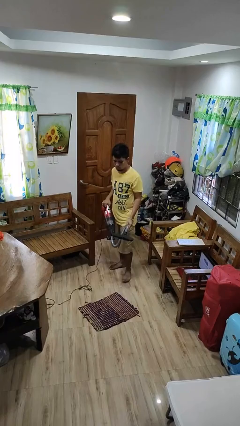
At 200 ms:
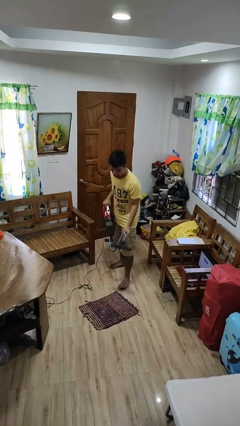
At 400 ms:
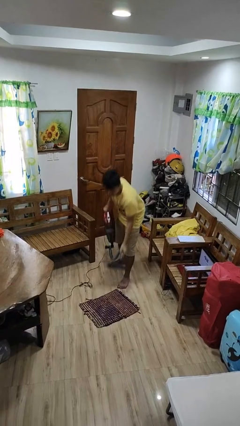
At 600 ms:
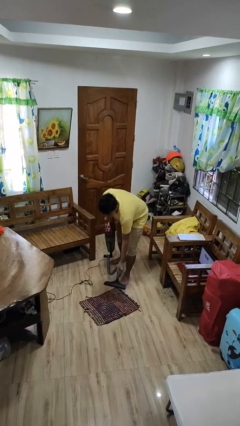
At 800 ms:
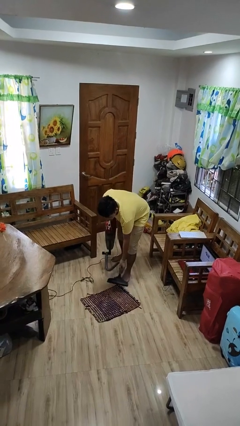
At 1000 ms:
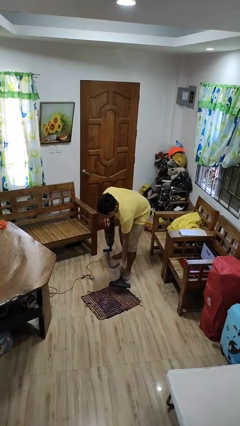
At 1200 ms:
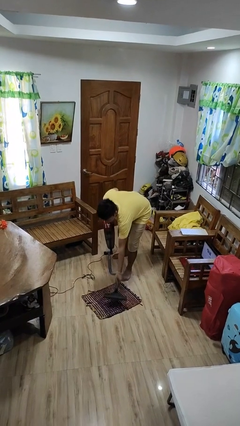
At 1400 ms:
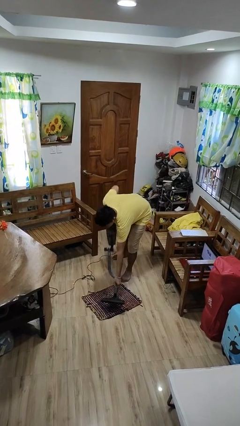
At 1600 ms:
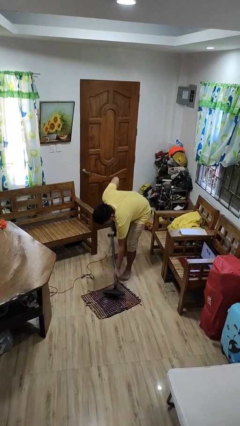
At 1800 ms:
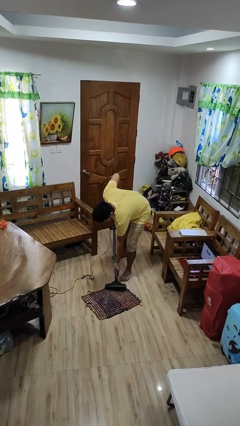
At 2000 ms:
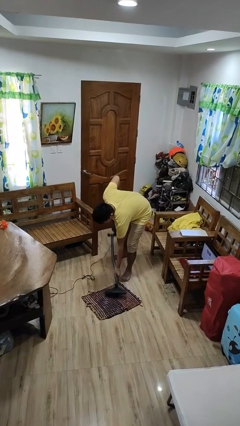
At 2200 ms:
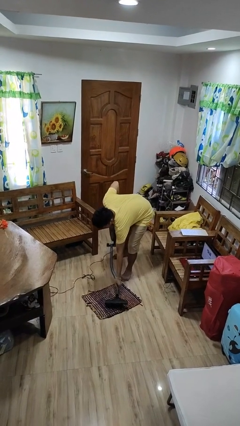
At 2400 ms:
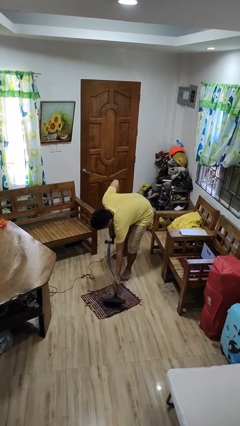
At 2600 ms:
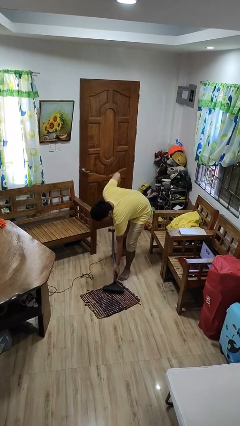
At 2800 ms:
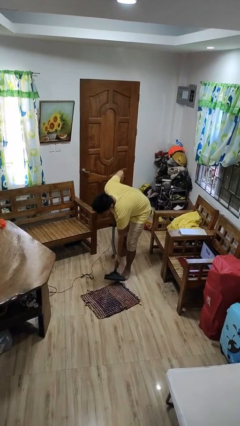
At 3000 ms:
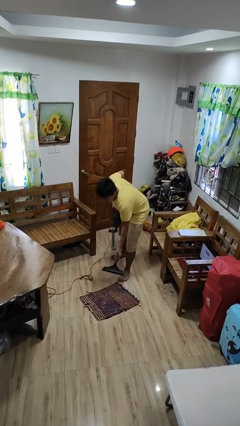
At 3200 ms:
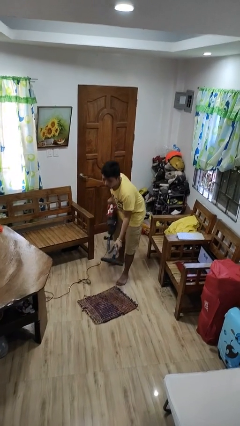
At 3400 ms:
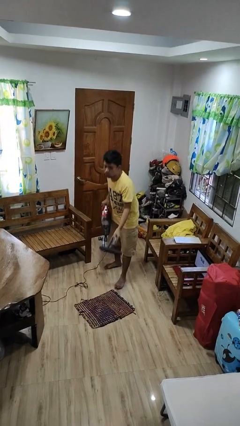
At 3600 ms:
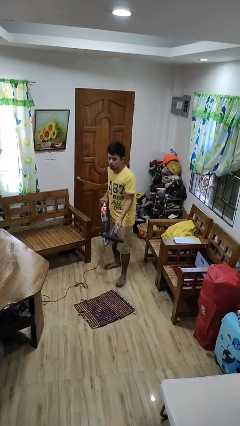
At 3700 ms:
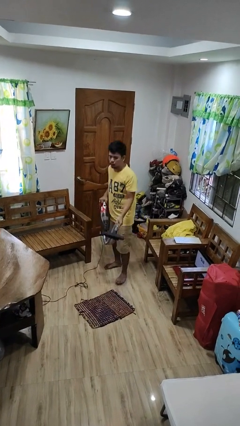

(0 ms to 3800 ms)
person vacuums carpet

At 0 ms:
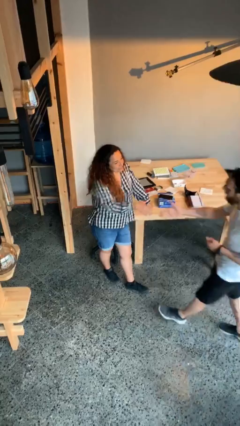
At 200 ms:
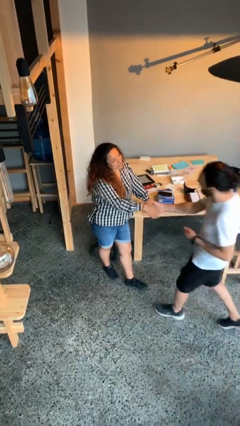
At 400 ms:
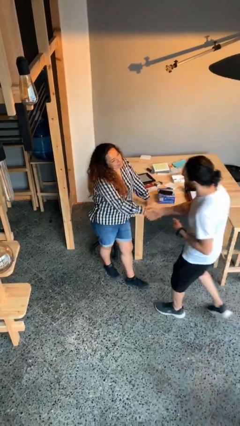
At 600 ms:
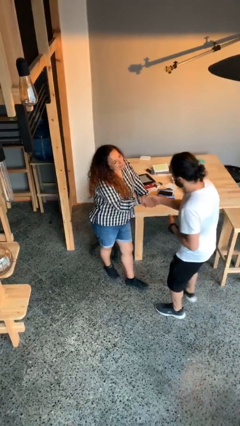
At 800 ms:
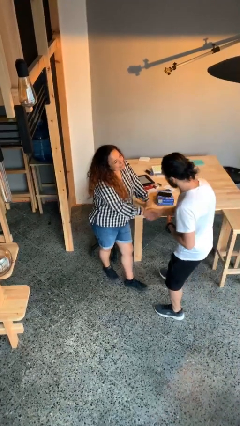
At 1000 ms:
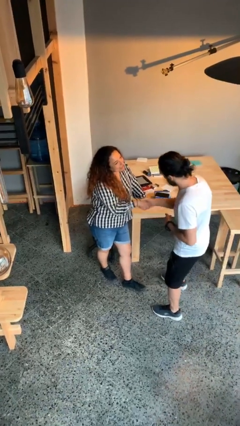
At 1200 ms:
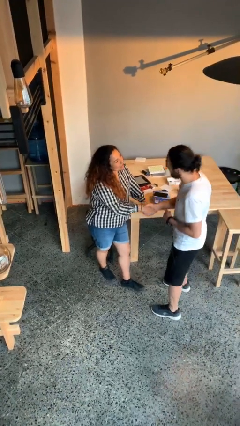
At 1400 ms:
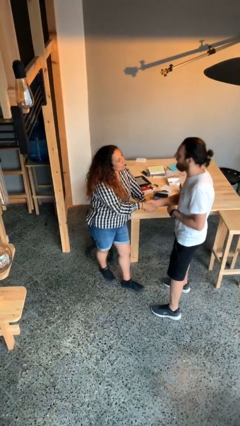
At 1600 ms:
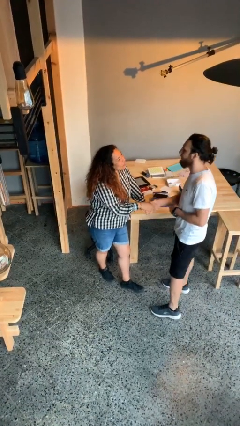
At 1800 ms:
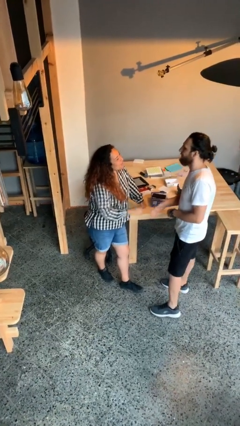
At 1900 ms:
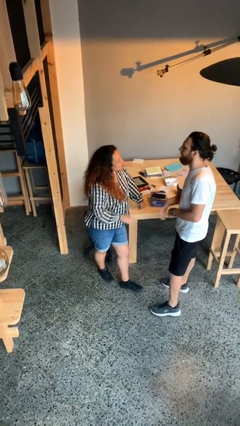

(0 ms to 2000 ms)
person shakes hand

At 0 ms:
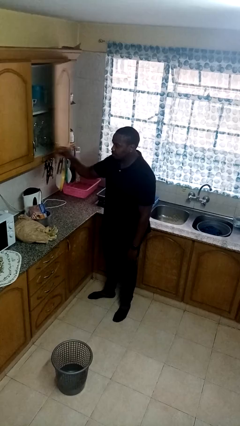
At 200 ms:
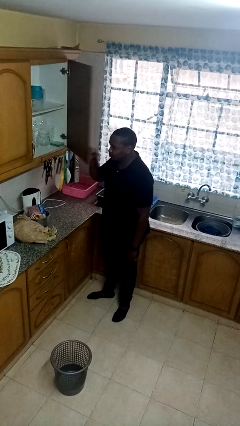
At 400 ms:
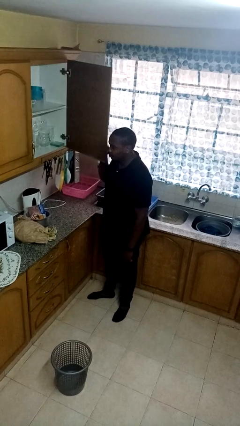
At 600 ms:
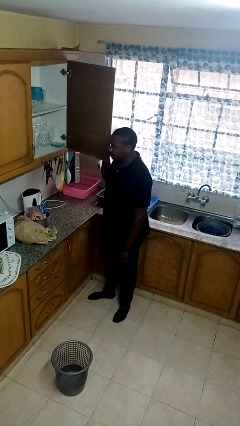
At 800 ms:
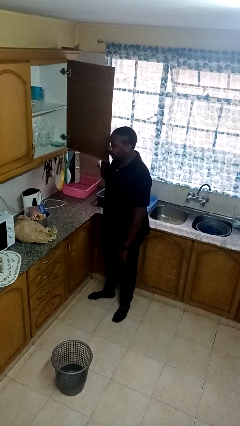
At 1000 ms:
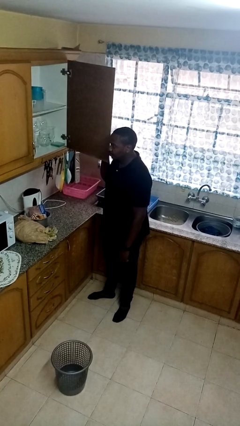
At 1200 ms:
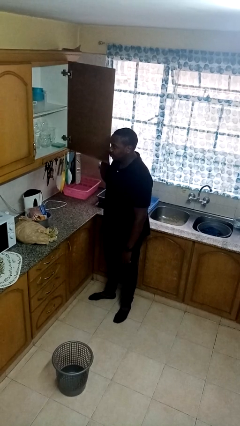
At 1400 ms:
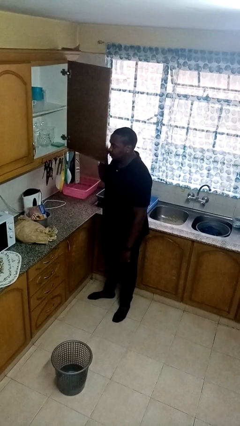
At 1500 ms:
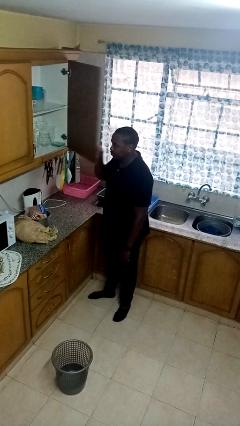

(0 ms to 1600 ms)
person opens cabinet

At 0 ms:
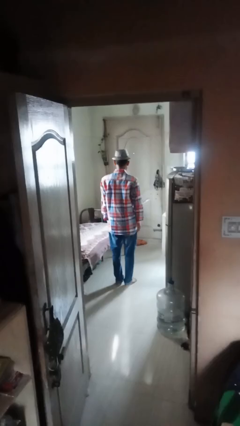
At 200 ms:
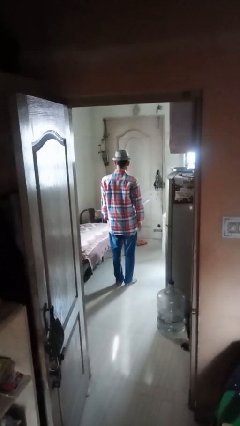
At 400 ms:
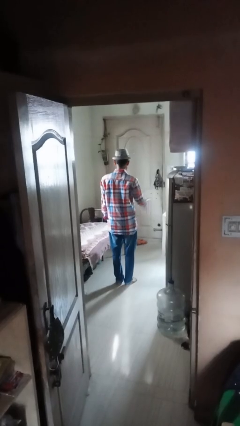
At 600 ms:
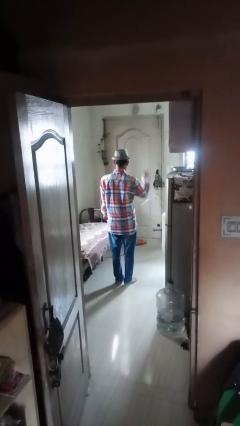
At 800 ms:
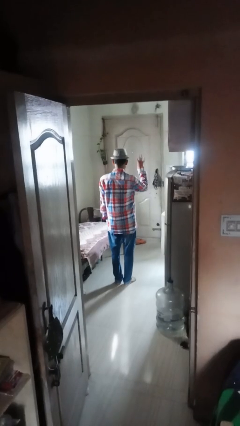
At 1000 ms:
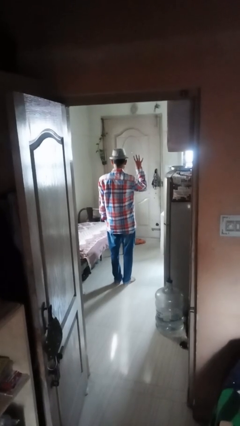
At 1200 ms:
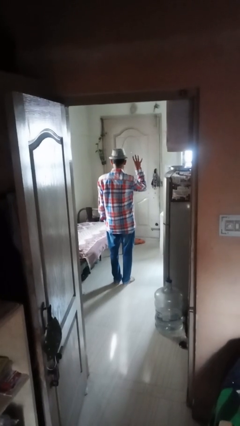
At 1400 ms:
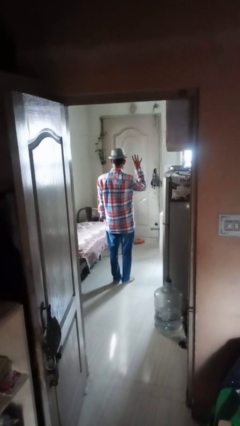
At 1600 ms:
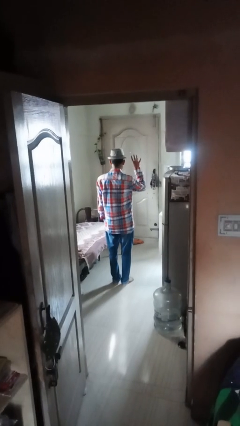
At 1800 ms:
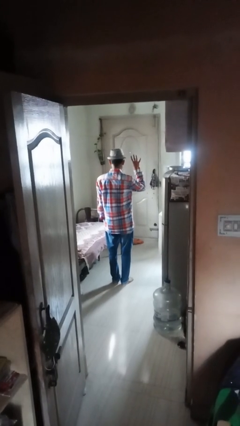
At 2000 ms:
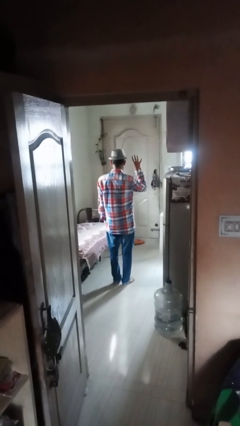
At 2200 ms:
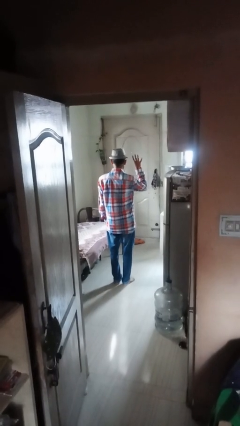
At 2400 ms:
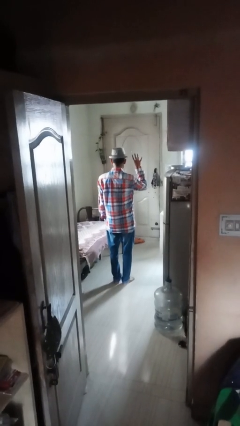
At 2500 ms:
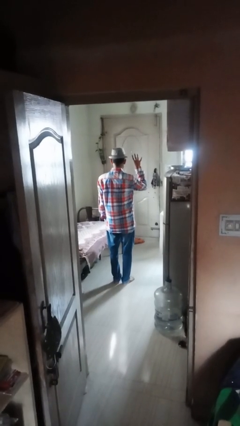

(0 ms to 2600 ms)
person gestures number four

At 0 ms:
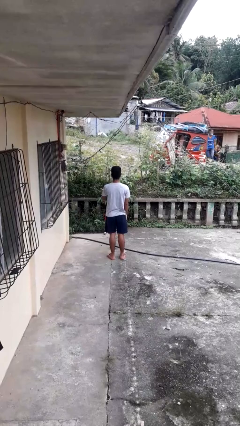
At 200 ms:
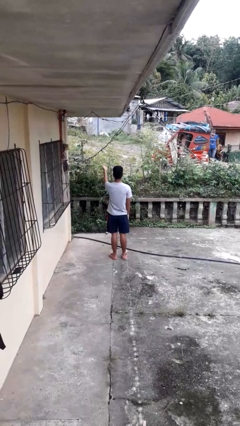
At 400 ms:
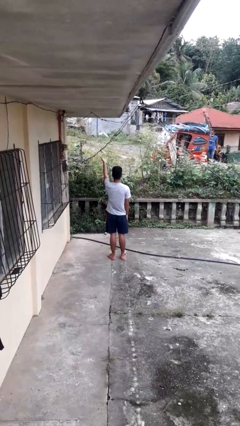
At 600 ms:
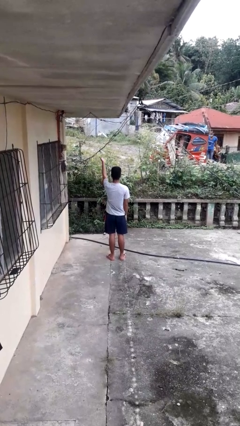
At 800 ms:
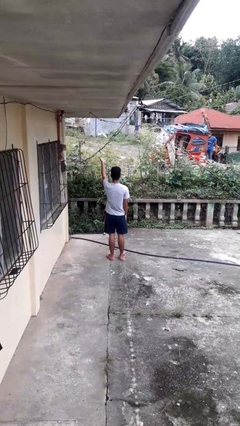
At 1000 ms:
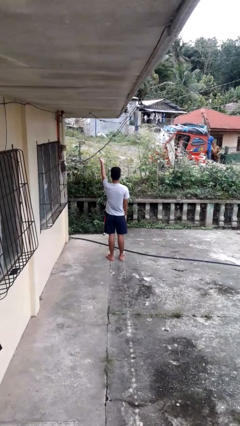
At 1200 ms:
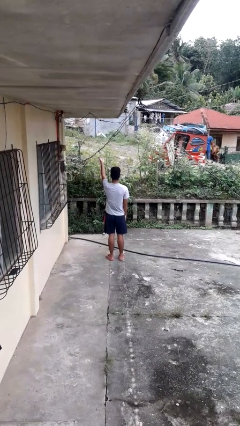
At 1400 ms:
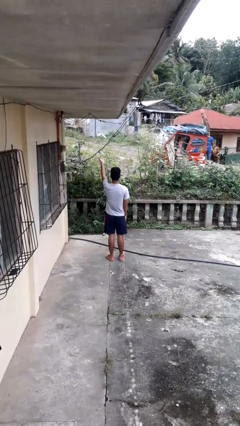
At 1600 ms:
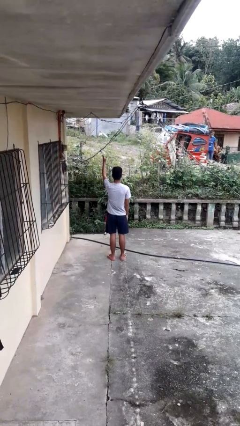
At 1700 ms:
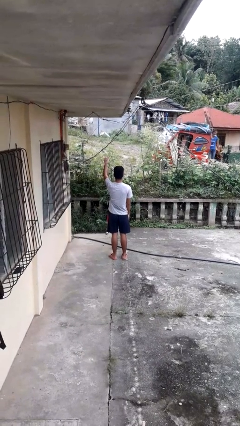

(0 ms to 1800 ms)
person gestures swipe up

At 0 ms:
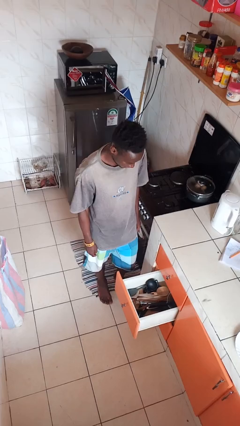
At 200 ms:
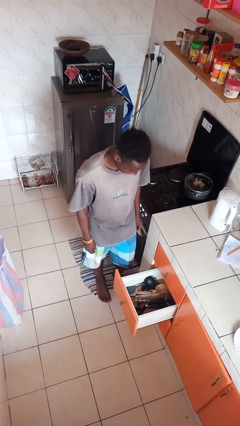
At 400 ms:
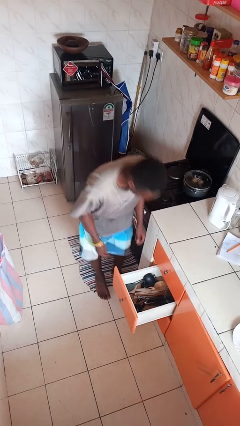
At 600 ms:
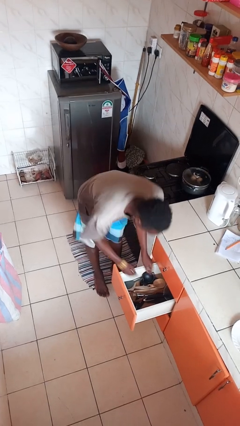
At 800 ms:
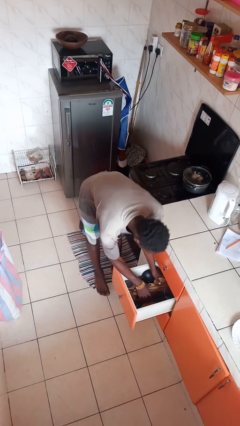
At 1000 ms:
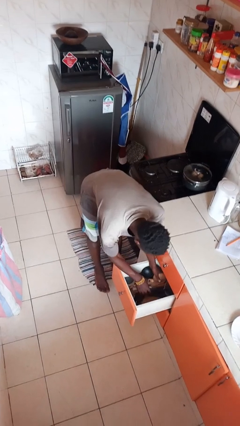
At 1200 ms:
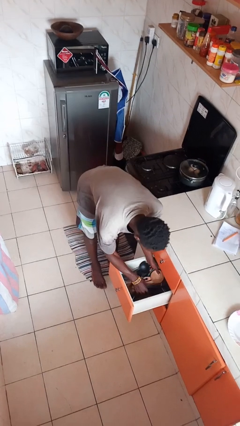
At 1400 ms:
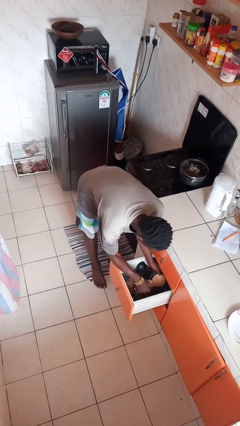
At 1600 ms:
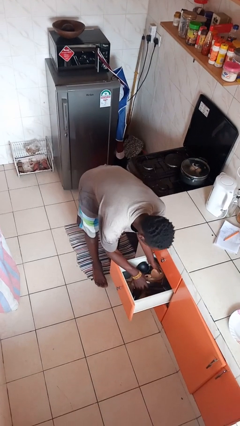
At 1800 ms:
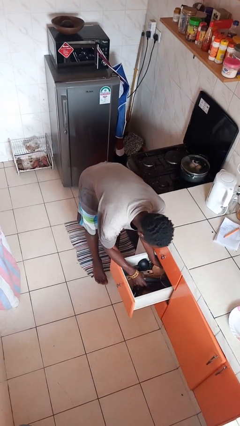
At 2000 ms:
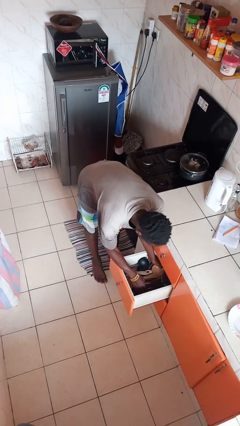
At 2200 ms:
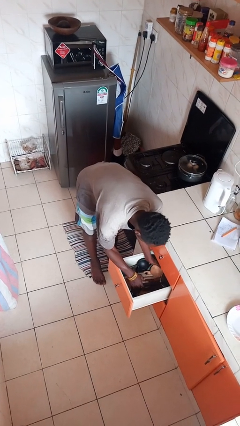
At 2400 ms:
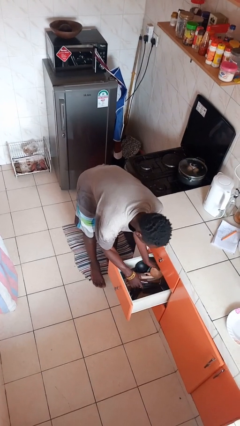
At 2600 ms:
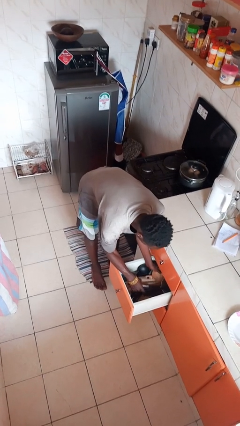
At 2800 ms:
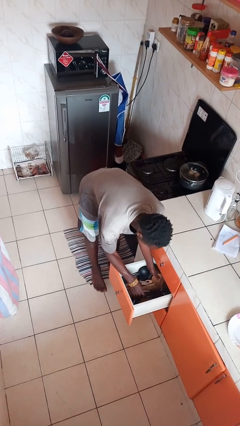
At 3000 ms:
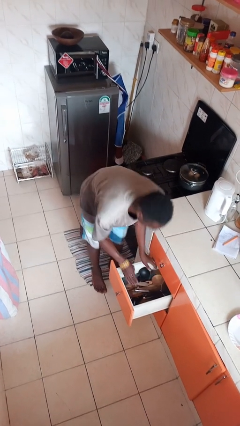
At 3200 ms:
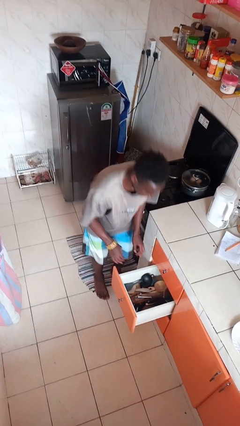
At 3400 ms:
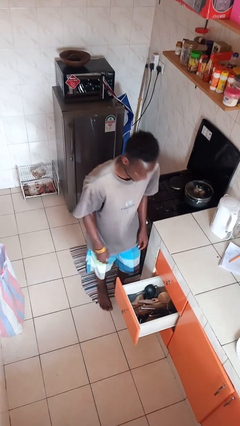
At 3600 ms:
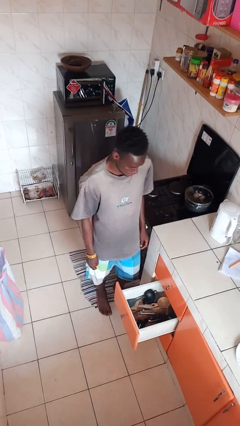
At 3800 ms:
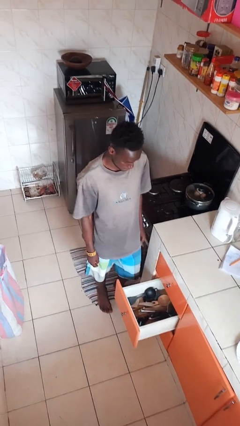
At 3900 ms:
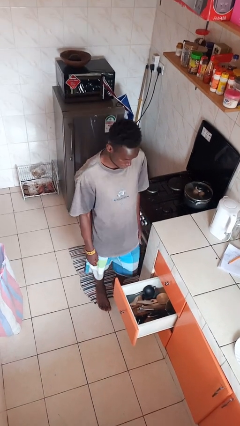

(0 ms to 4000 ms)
person searches in kitchen drawer

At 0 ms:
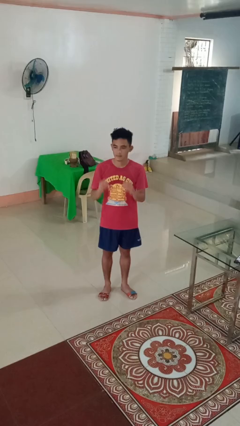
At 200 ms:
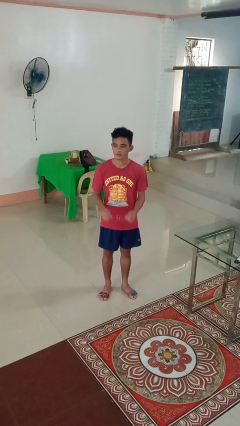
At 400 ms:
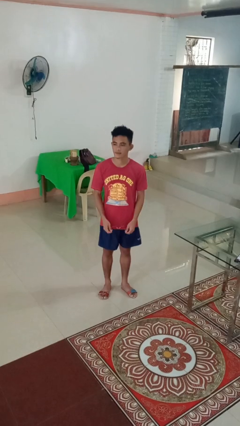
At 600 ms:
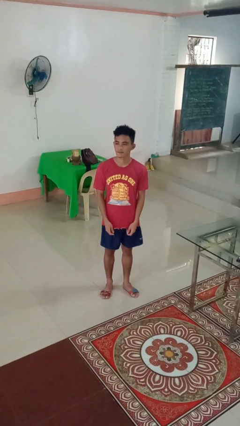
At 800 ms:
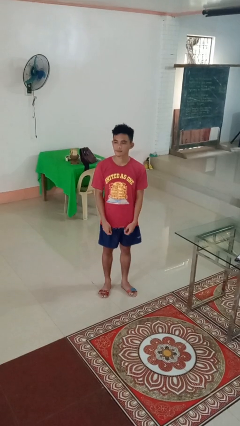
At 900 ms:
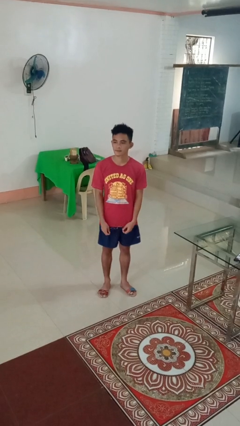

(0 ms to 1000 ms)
person takes off glasses

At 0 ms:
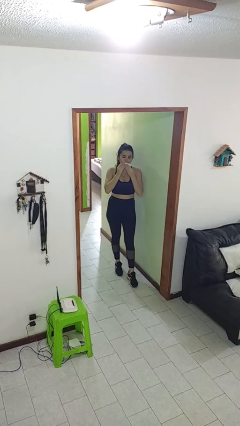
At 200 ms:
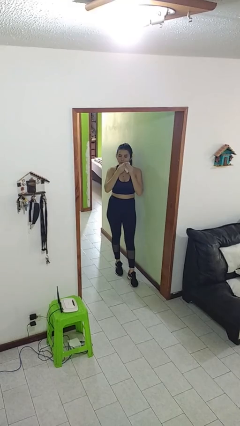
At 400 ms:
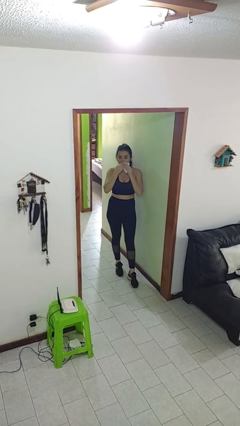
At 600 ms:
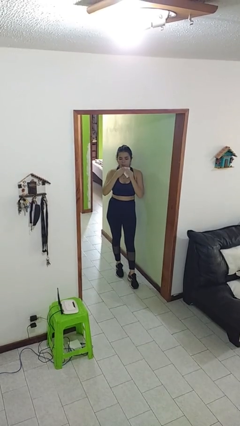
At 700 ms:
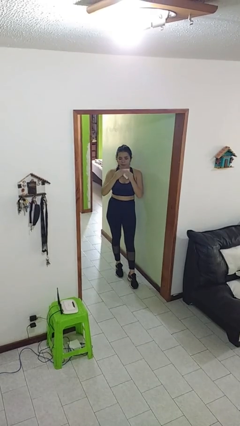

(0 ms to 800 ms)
person wipes mouth with napkin
